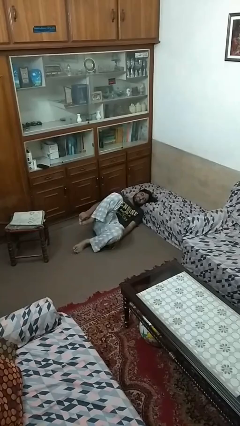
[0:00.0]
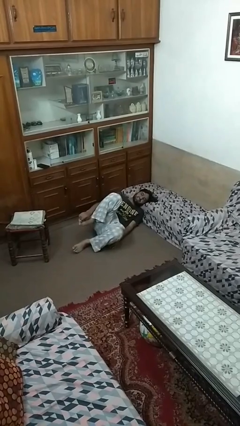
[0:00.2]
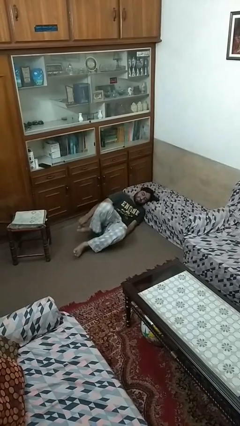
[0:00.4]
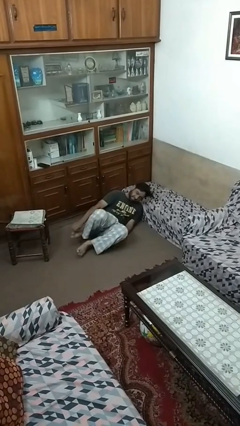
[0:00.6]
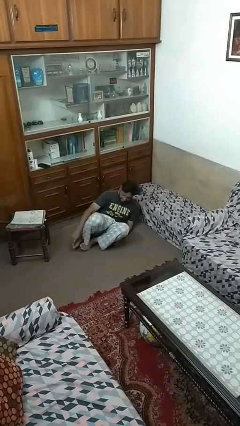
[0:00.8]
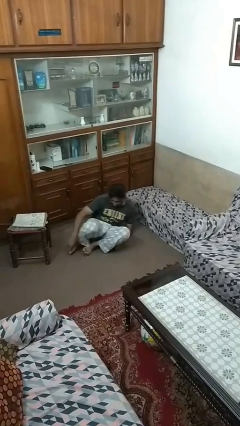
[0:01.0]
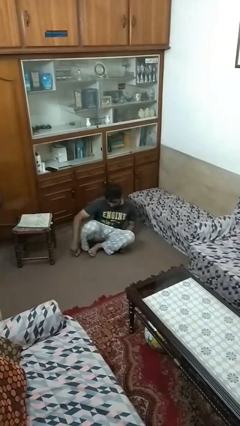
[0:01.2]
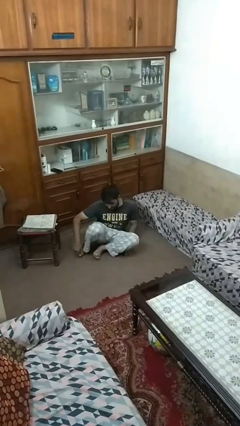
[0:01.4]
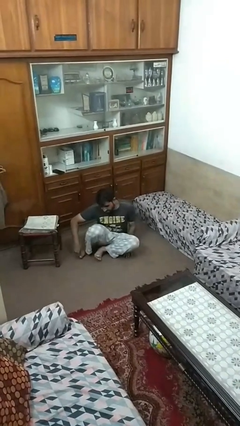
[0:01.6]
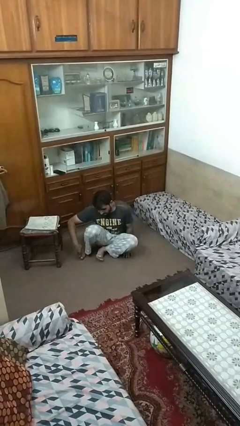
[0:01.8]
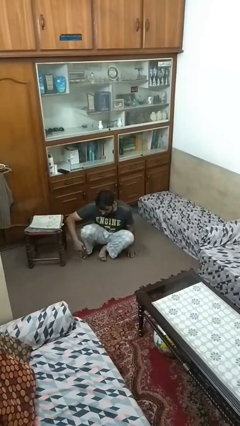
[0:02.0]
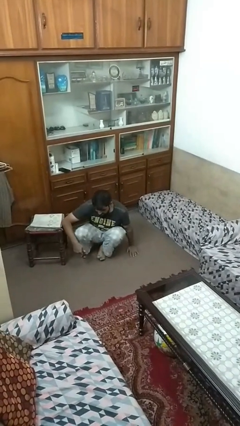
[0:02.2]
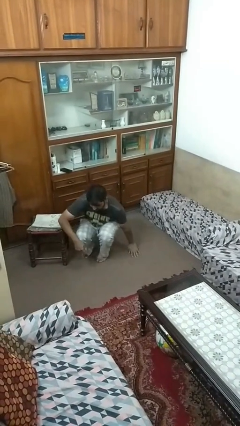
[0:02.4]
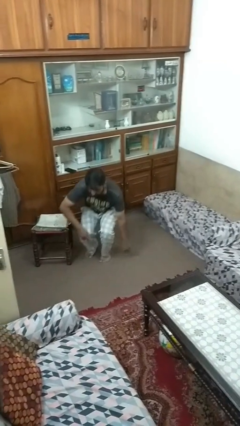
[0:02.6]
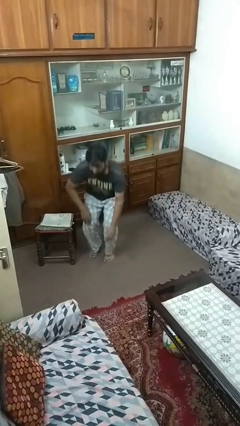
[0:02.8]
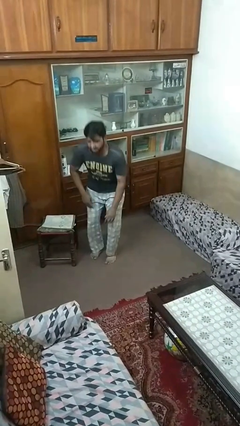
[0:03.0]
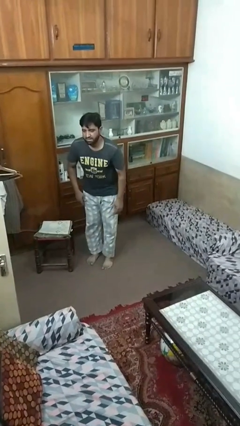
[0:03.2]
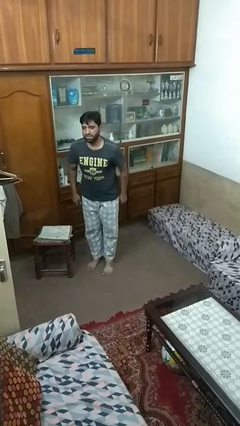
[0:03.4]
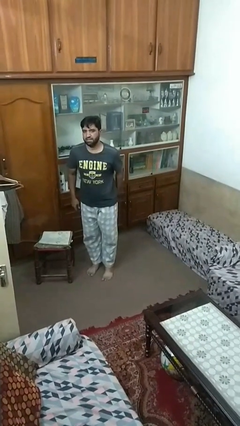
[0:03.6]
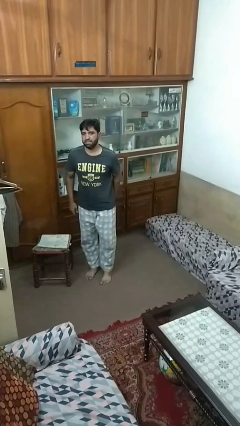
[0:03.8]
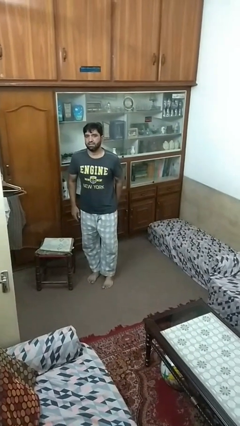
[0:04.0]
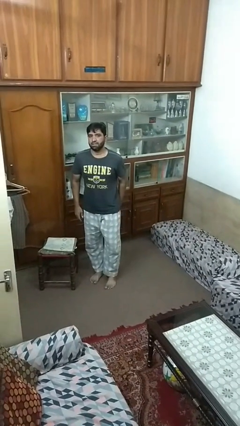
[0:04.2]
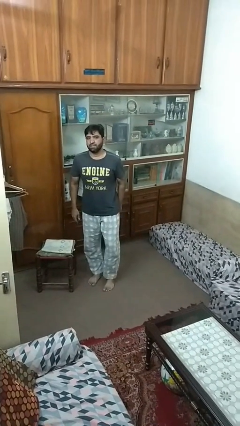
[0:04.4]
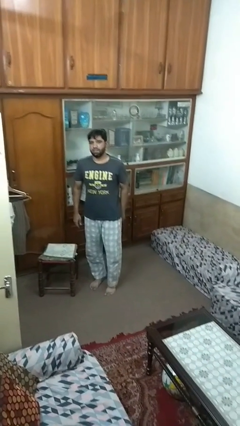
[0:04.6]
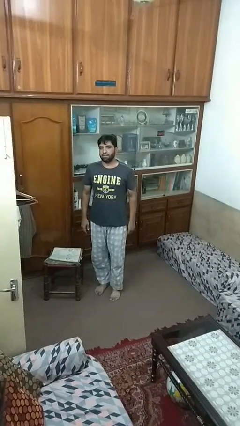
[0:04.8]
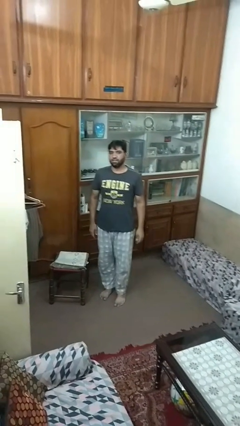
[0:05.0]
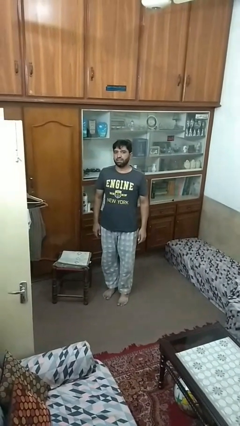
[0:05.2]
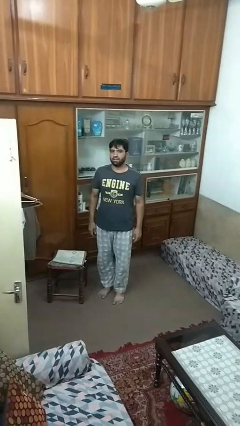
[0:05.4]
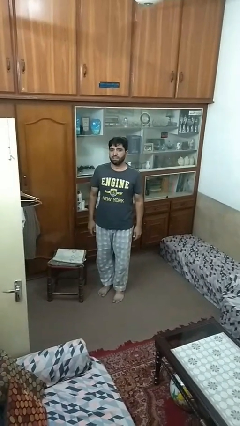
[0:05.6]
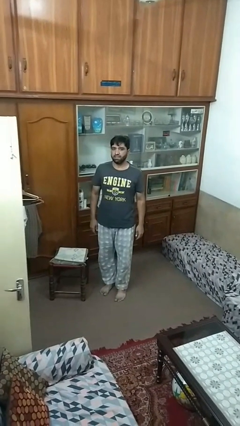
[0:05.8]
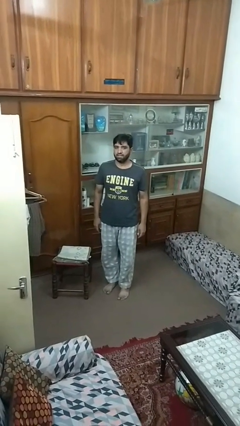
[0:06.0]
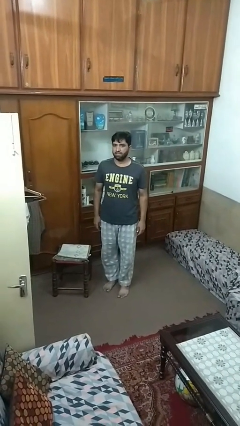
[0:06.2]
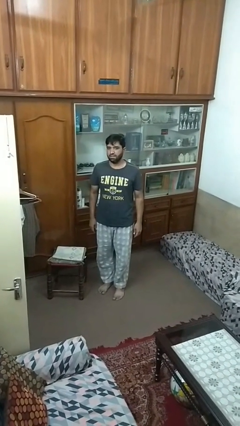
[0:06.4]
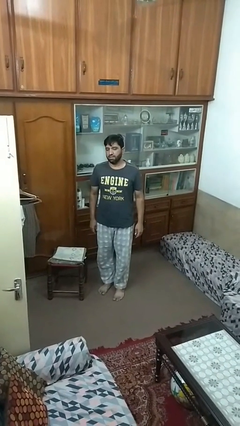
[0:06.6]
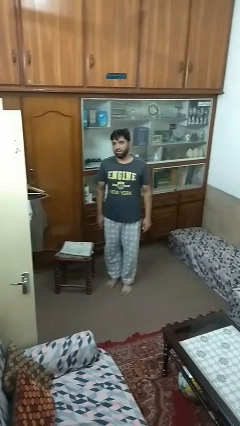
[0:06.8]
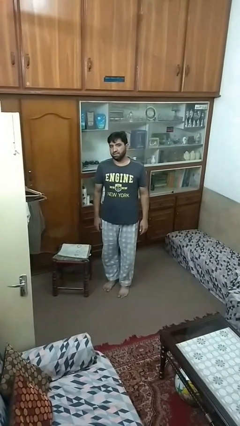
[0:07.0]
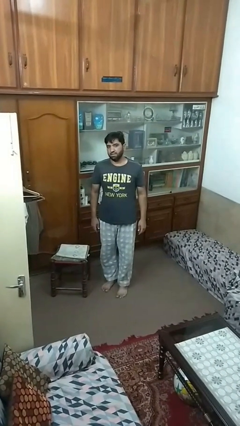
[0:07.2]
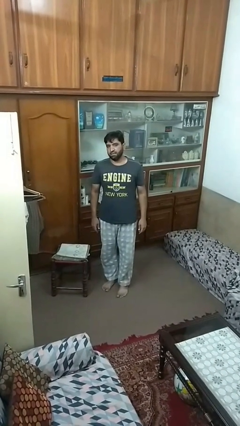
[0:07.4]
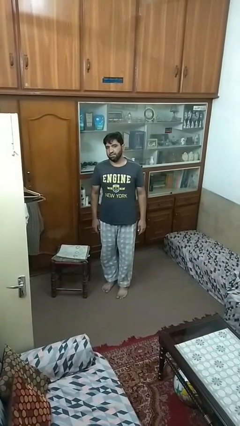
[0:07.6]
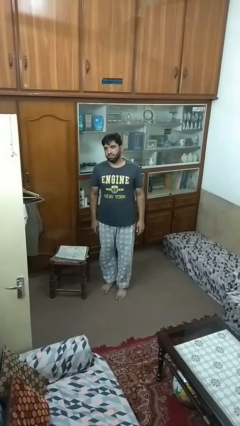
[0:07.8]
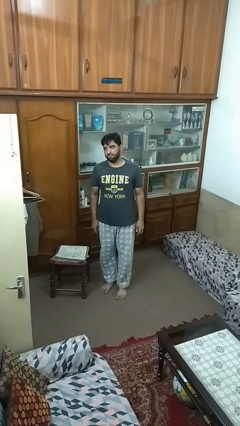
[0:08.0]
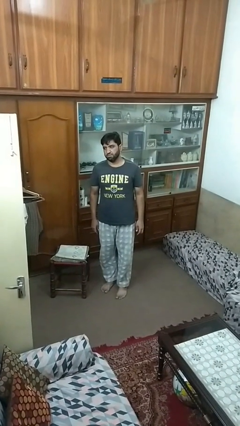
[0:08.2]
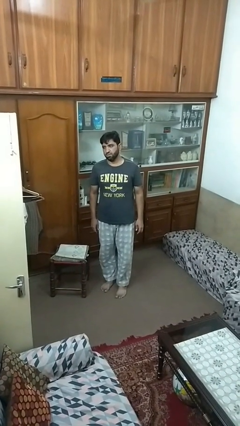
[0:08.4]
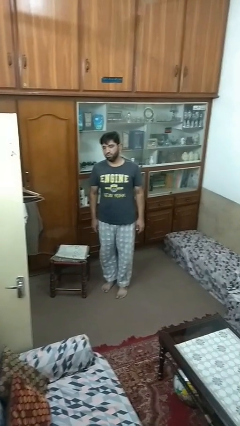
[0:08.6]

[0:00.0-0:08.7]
person stands up from floor

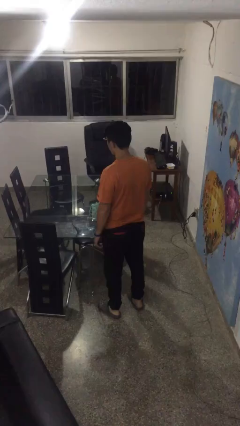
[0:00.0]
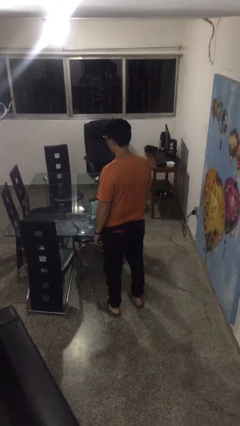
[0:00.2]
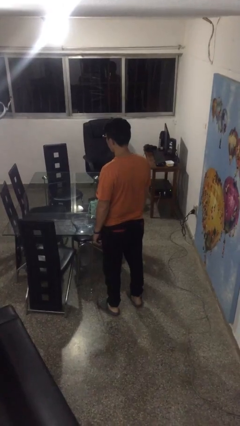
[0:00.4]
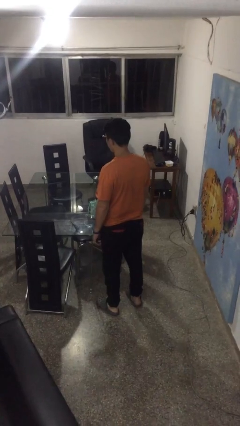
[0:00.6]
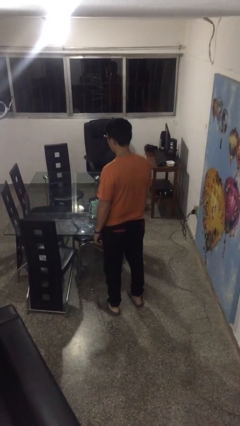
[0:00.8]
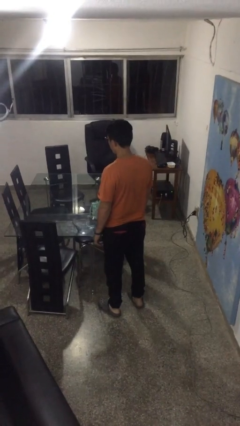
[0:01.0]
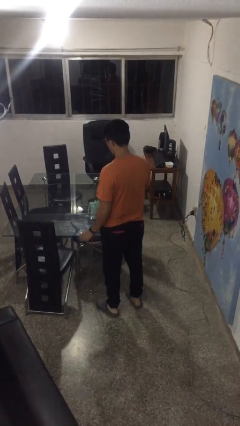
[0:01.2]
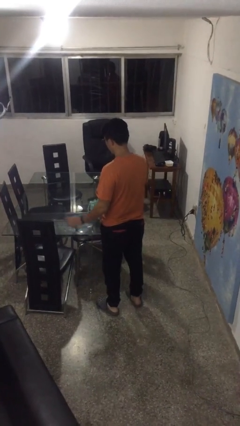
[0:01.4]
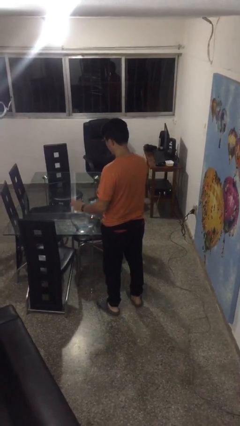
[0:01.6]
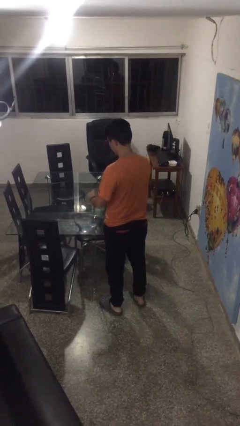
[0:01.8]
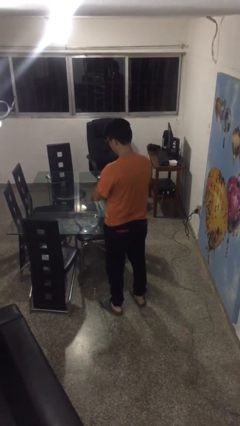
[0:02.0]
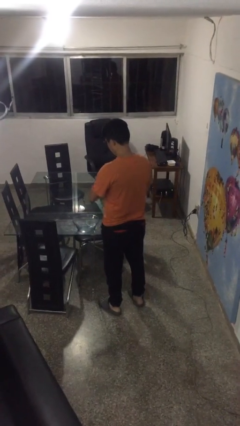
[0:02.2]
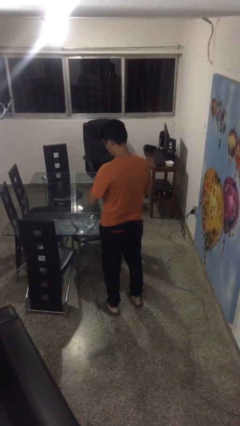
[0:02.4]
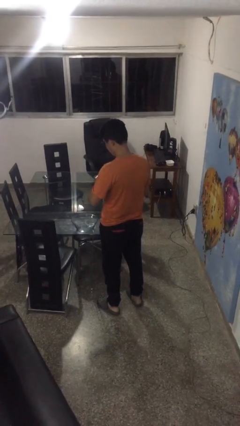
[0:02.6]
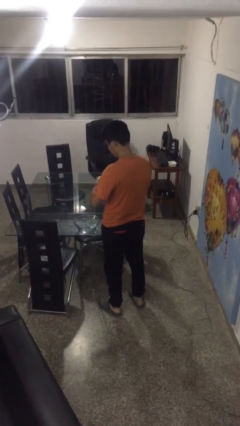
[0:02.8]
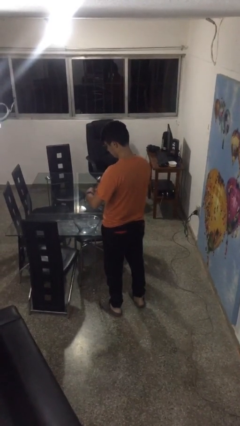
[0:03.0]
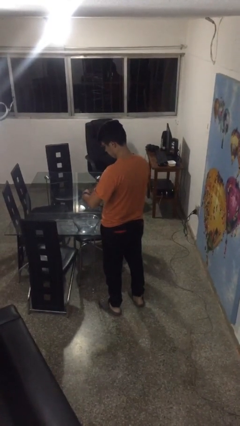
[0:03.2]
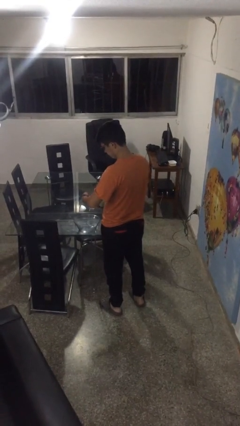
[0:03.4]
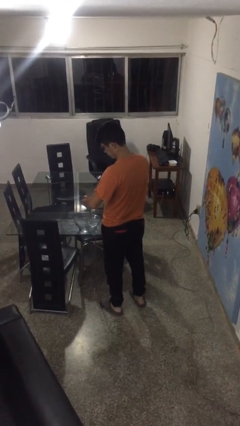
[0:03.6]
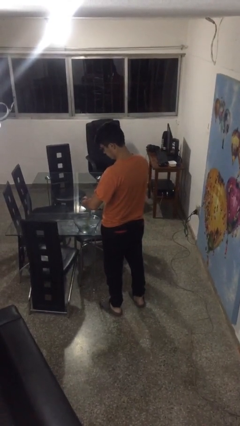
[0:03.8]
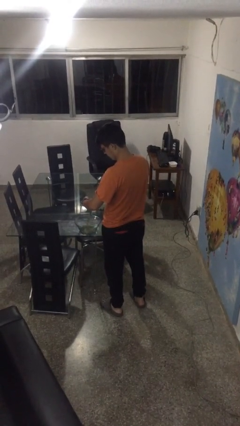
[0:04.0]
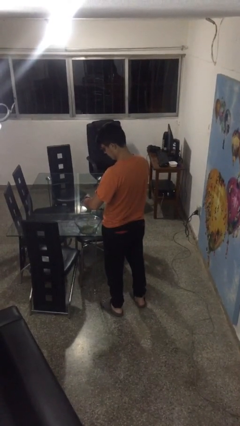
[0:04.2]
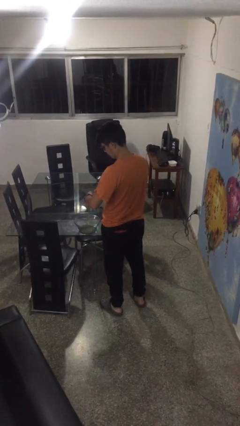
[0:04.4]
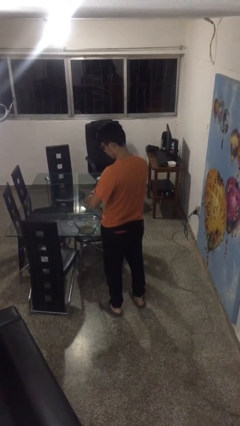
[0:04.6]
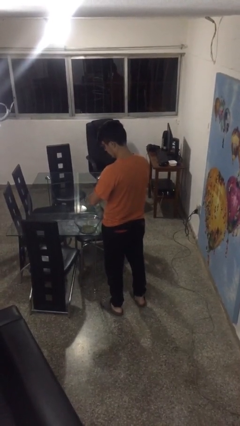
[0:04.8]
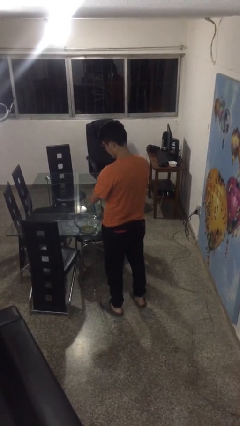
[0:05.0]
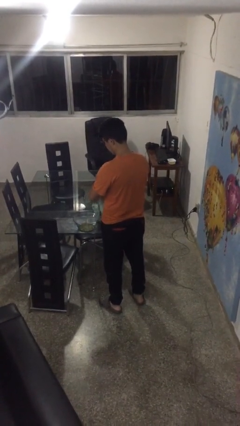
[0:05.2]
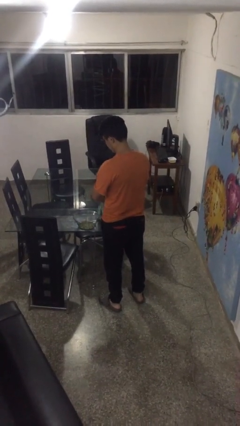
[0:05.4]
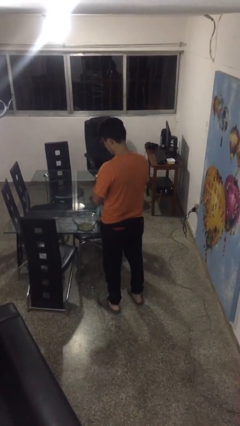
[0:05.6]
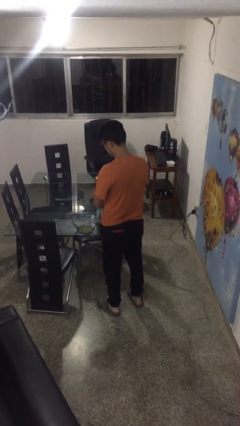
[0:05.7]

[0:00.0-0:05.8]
person pours into bowl

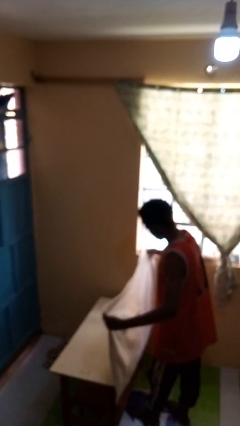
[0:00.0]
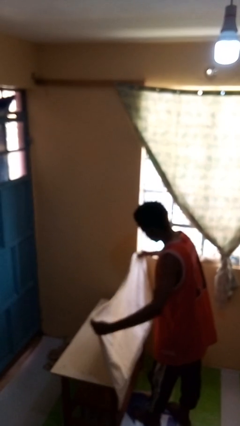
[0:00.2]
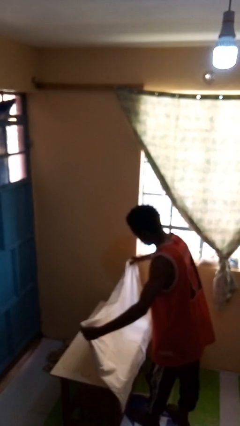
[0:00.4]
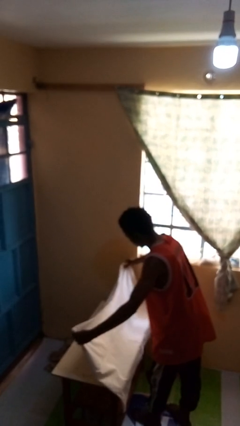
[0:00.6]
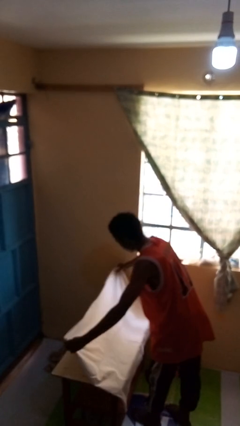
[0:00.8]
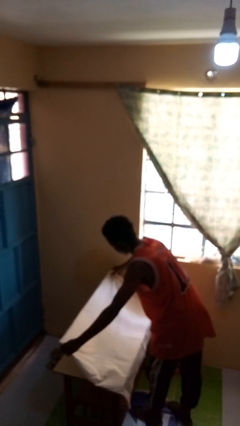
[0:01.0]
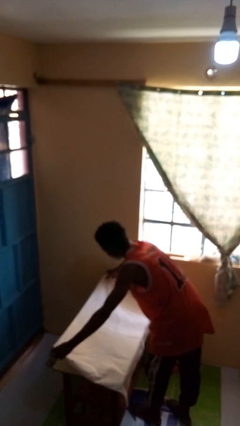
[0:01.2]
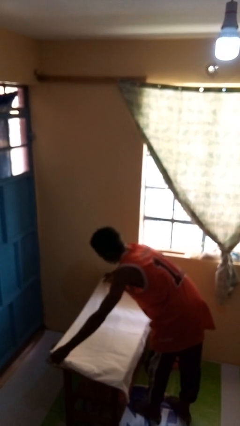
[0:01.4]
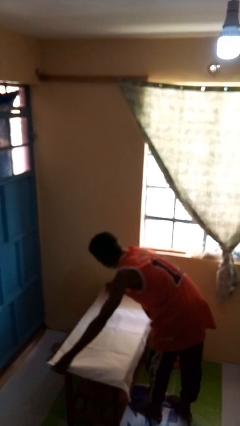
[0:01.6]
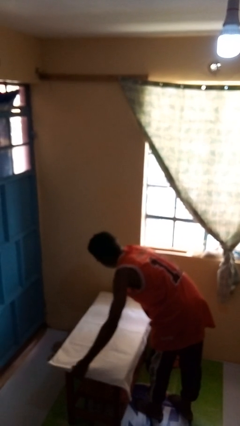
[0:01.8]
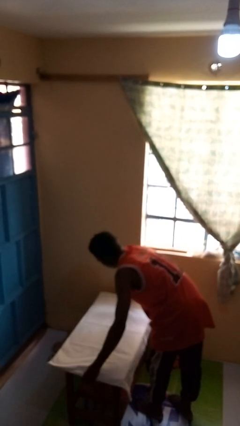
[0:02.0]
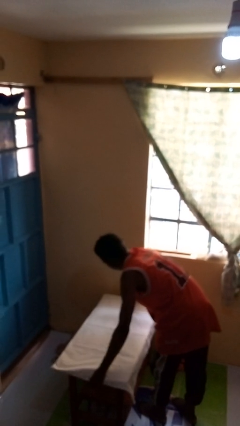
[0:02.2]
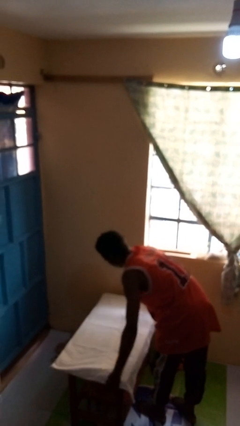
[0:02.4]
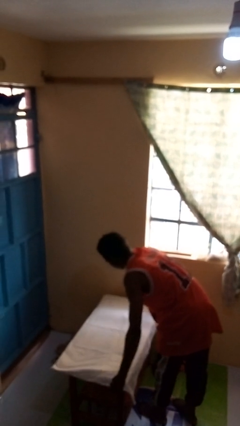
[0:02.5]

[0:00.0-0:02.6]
person spreads tablecloth

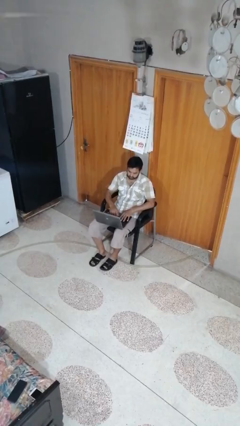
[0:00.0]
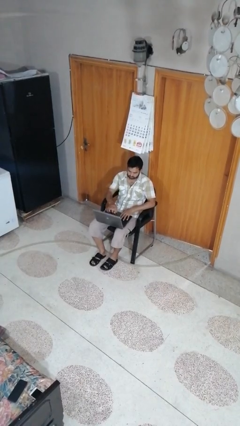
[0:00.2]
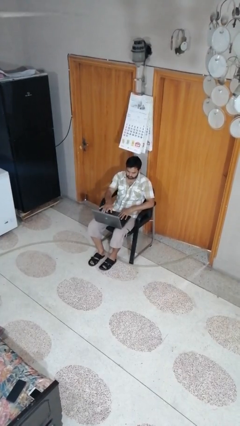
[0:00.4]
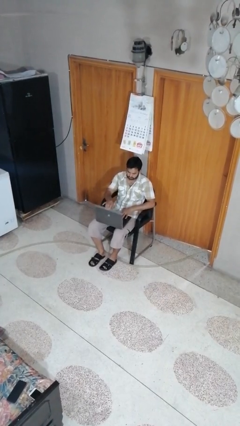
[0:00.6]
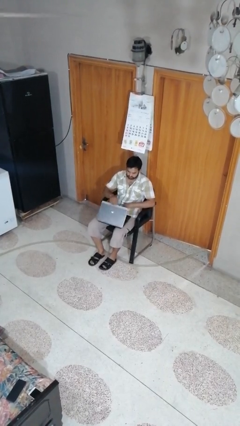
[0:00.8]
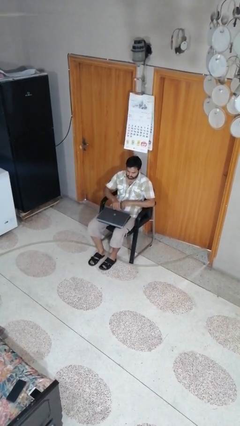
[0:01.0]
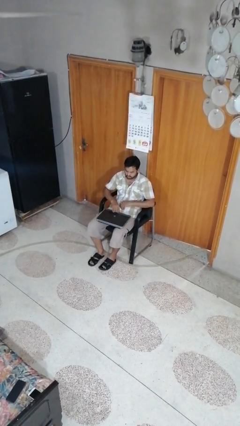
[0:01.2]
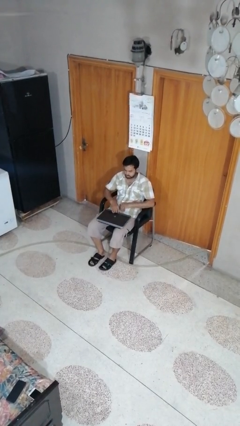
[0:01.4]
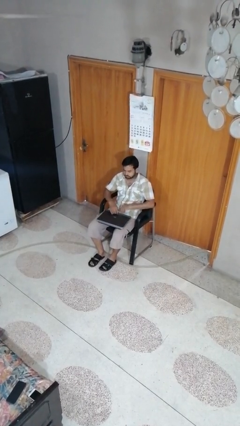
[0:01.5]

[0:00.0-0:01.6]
person closes laptop
